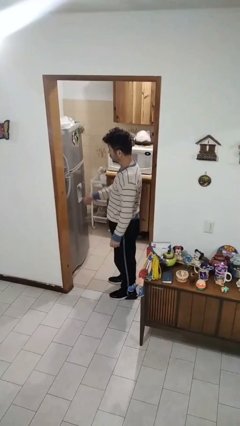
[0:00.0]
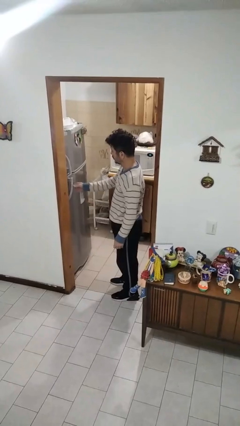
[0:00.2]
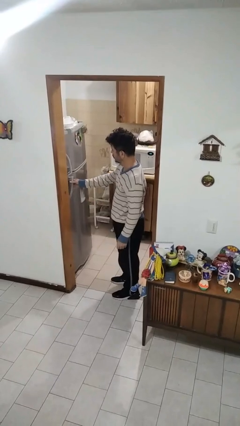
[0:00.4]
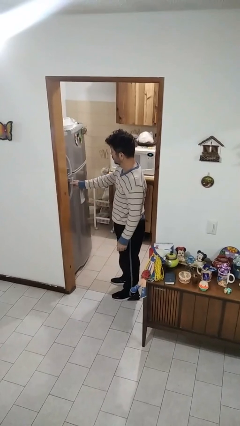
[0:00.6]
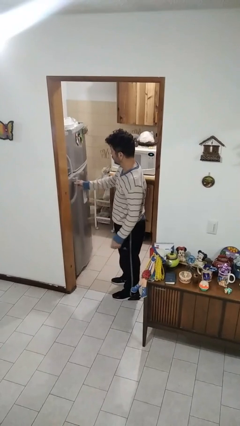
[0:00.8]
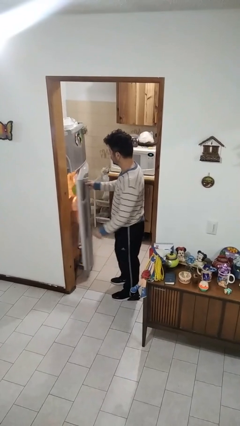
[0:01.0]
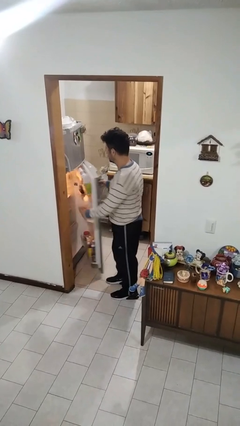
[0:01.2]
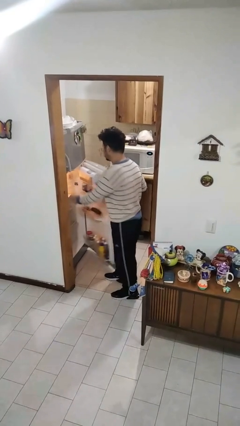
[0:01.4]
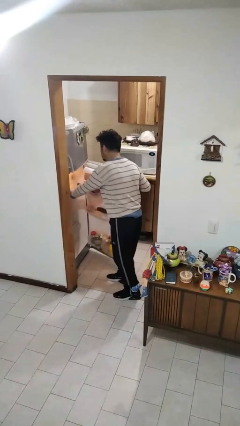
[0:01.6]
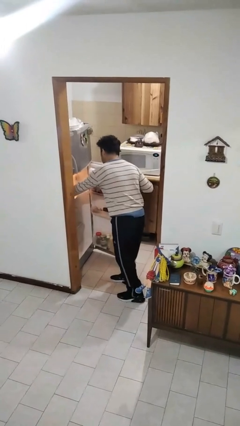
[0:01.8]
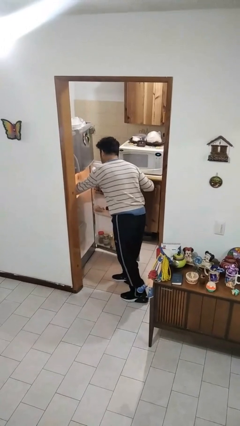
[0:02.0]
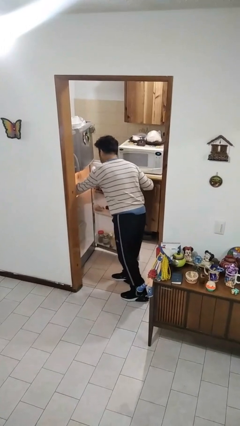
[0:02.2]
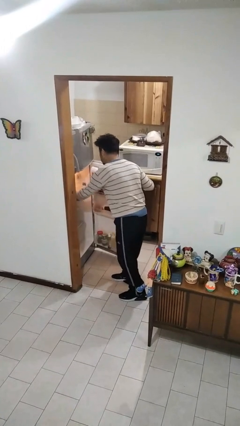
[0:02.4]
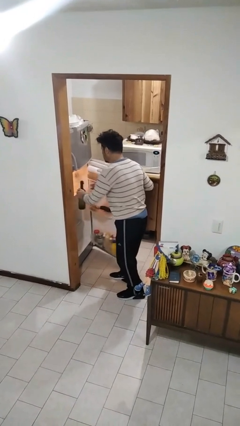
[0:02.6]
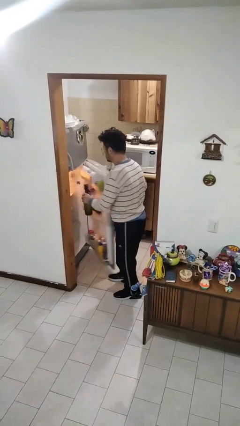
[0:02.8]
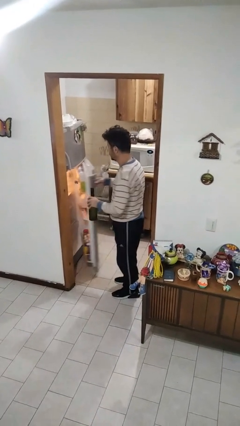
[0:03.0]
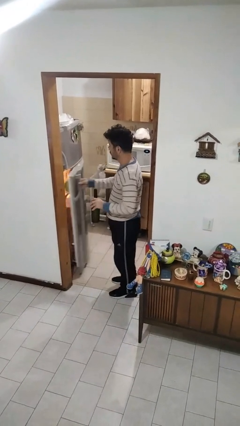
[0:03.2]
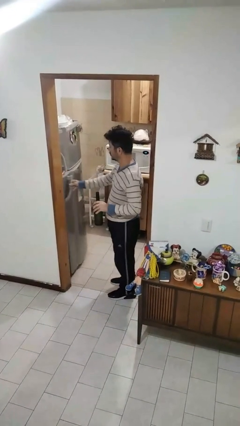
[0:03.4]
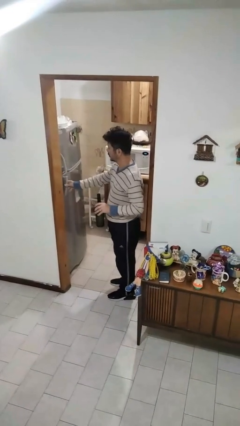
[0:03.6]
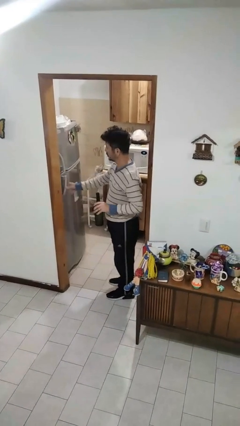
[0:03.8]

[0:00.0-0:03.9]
person takes object from refrigerator

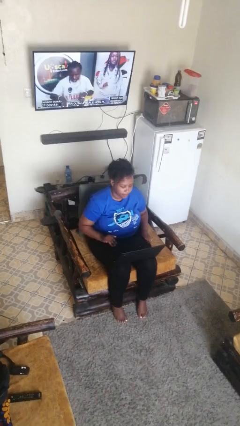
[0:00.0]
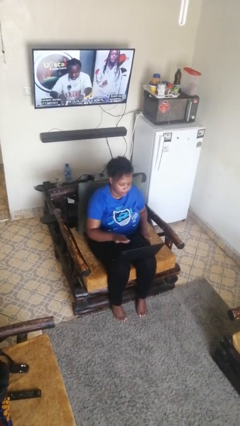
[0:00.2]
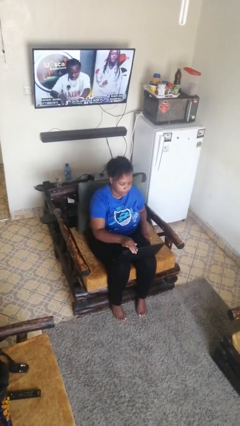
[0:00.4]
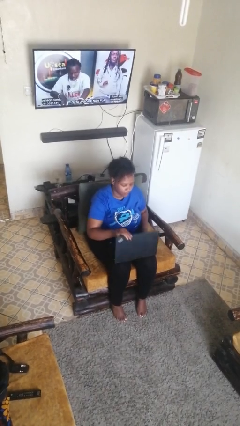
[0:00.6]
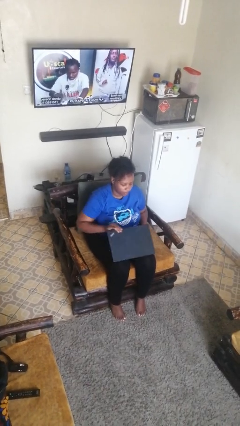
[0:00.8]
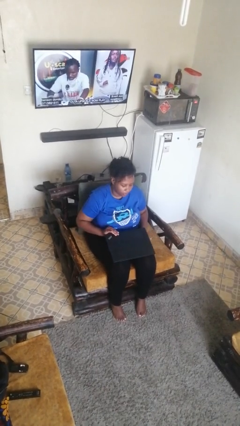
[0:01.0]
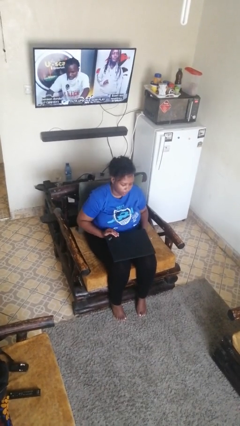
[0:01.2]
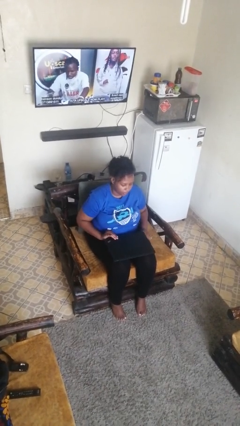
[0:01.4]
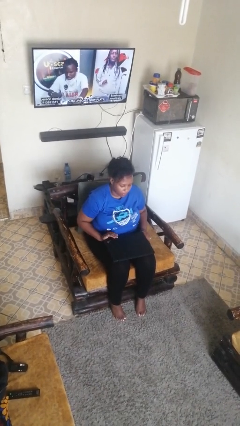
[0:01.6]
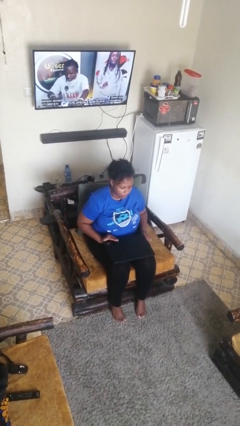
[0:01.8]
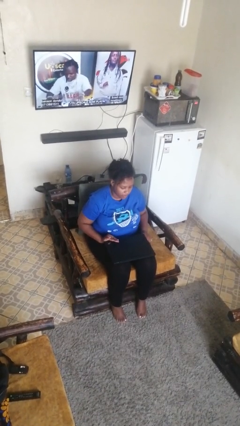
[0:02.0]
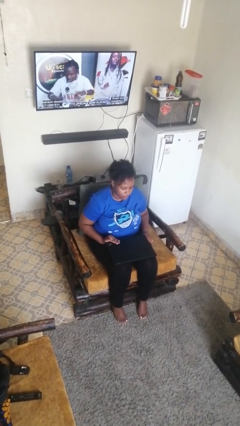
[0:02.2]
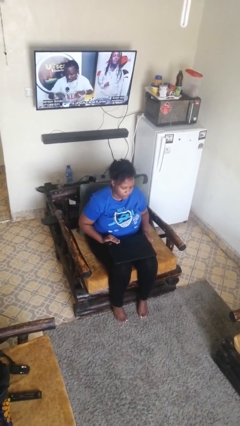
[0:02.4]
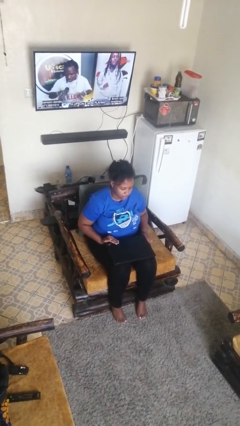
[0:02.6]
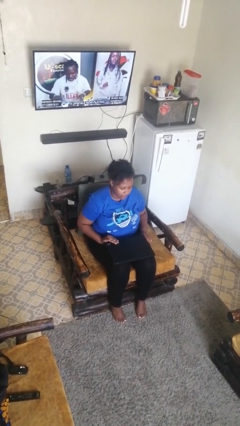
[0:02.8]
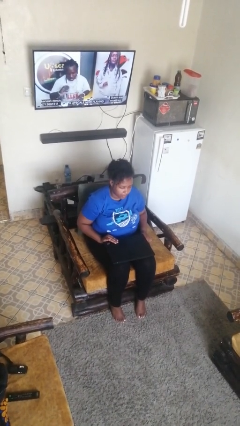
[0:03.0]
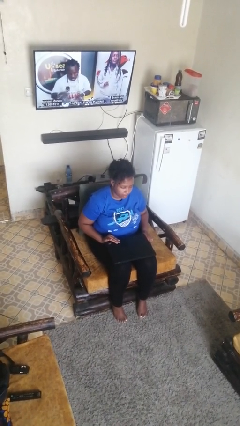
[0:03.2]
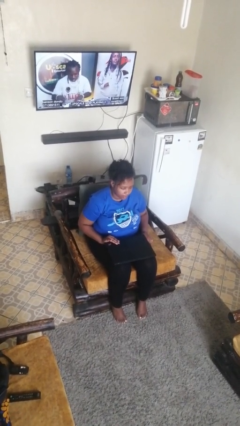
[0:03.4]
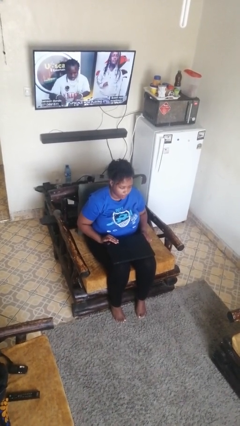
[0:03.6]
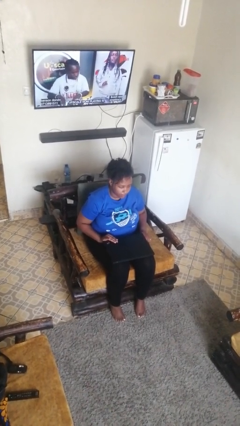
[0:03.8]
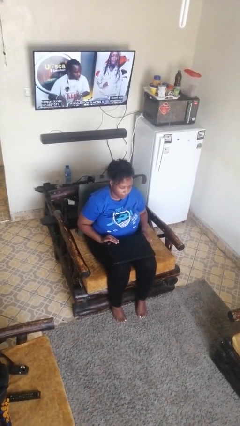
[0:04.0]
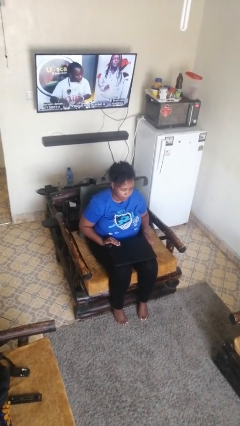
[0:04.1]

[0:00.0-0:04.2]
person closes laptop

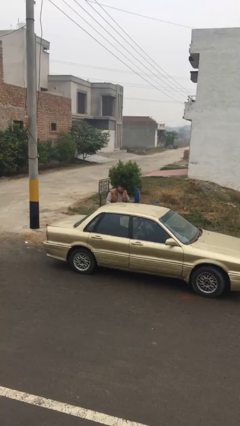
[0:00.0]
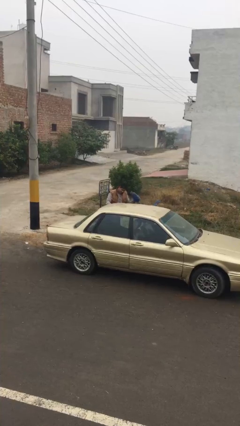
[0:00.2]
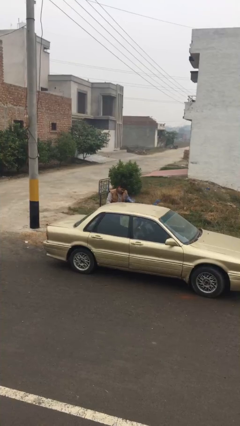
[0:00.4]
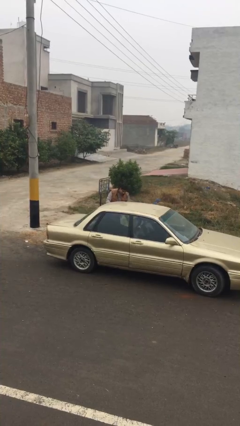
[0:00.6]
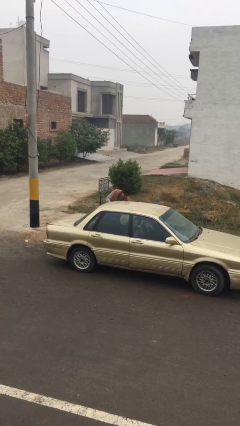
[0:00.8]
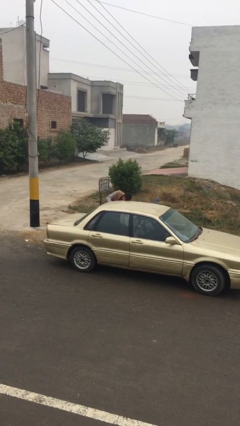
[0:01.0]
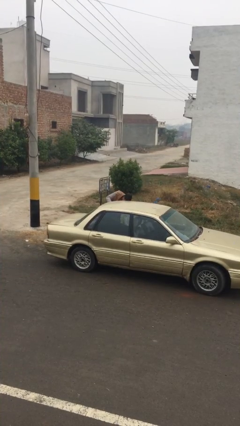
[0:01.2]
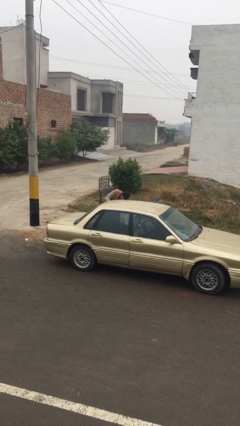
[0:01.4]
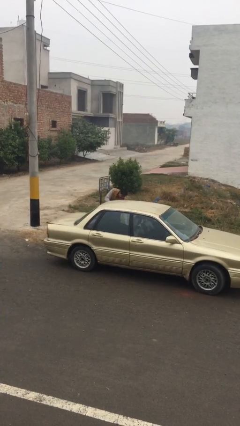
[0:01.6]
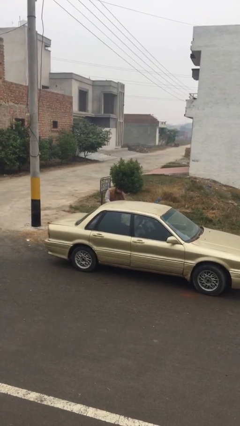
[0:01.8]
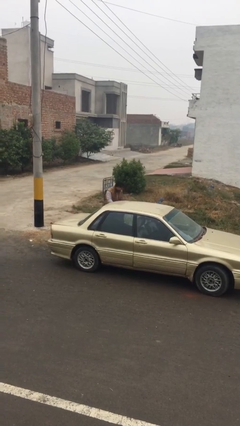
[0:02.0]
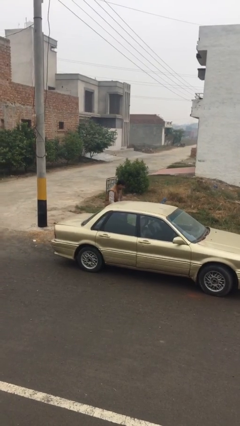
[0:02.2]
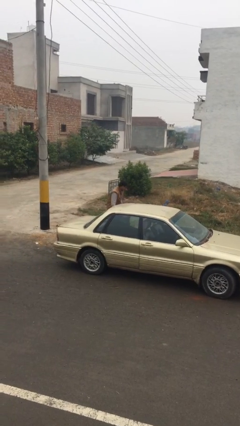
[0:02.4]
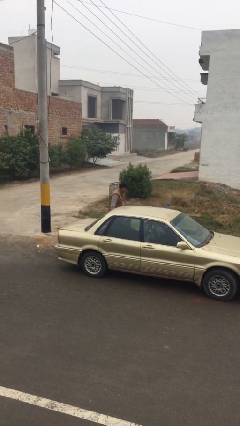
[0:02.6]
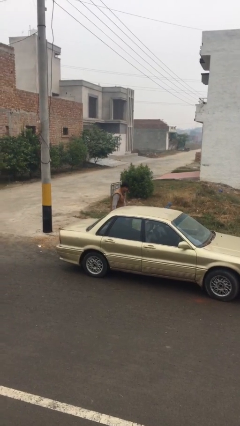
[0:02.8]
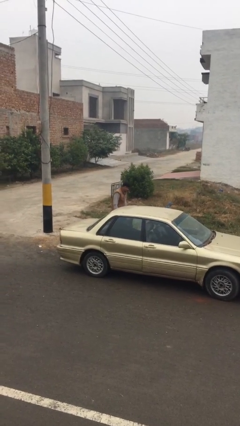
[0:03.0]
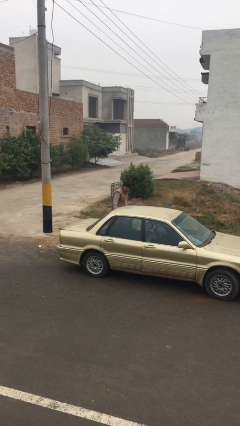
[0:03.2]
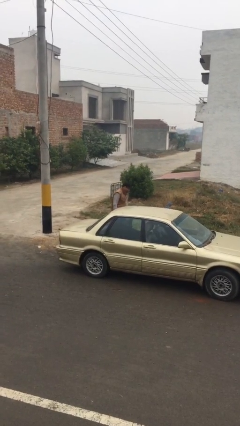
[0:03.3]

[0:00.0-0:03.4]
person loads car

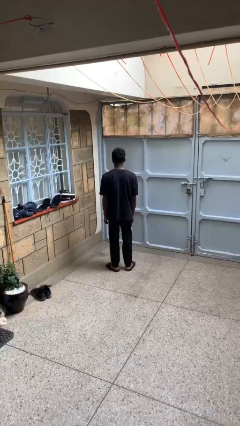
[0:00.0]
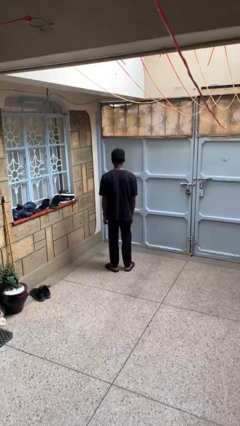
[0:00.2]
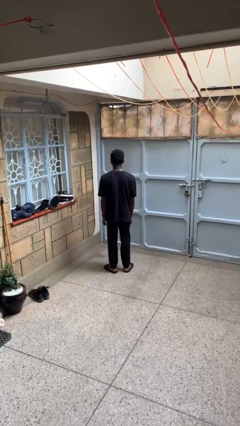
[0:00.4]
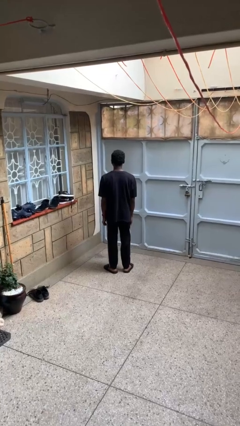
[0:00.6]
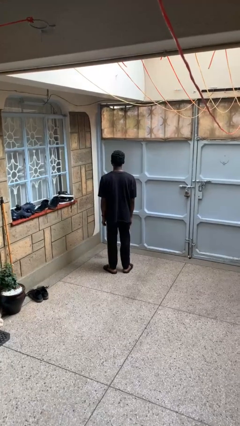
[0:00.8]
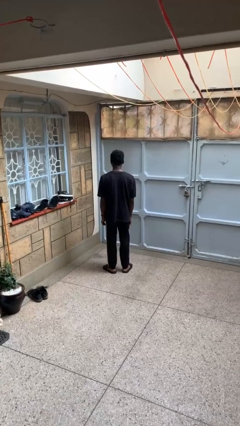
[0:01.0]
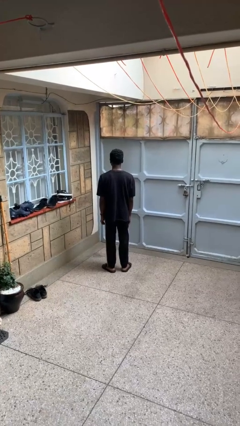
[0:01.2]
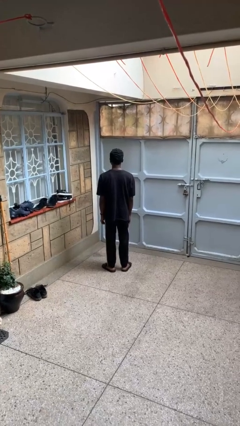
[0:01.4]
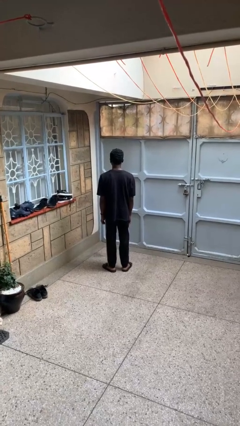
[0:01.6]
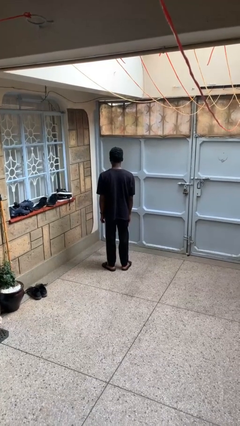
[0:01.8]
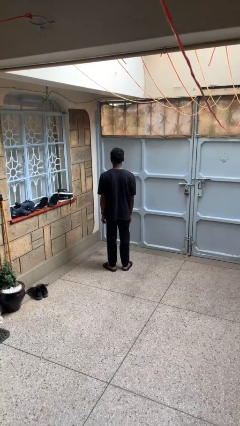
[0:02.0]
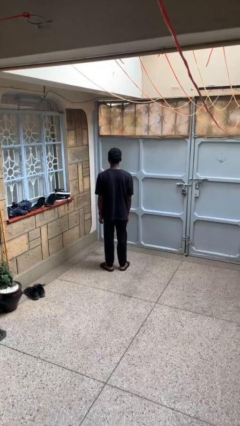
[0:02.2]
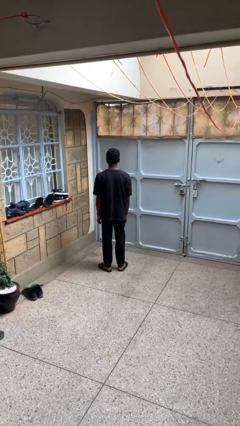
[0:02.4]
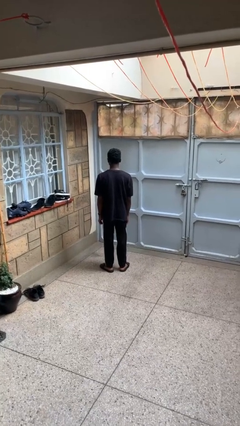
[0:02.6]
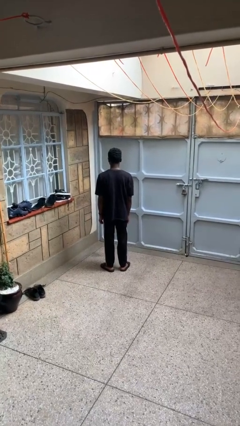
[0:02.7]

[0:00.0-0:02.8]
person nods head

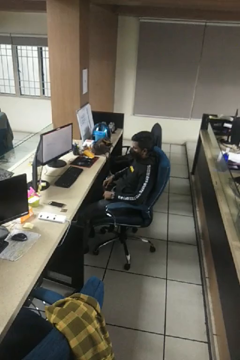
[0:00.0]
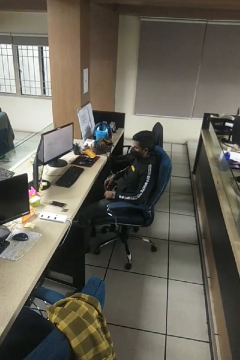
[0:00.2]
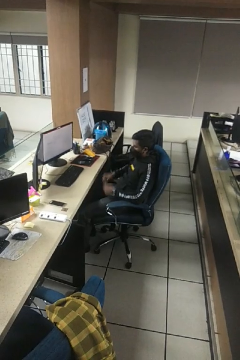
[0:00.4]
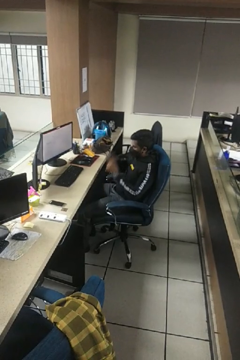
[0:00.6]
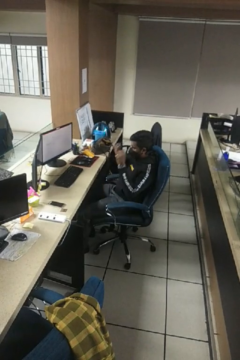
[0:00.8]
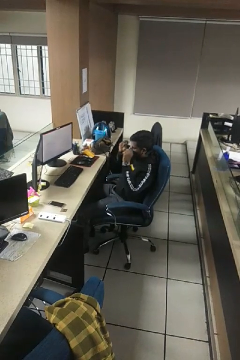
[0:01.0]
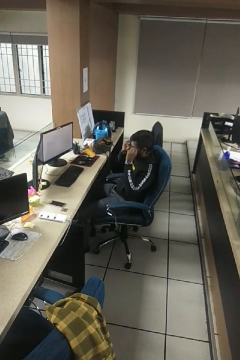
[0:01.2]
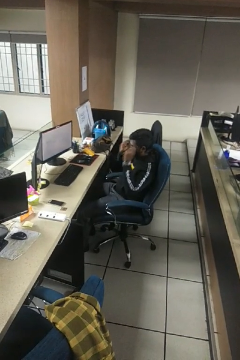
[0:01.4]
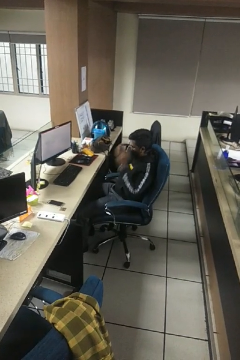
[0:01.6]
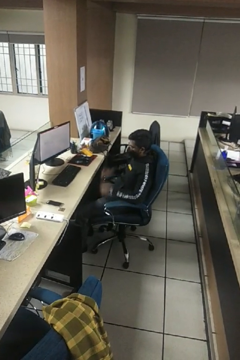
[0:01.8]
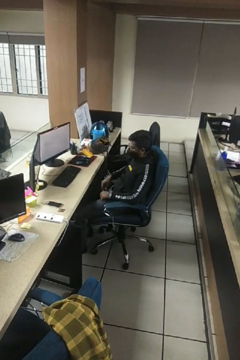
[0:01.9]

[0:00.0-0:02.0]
person puts on glasses

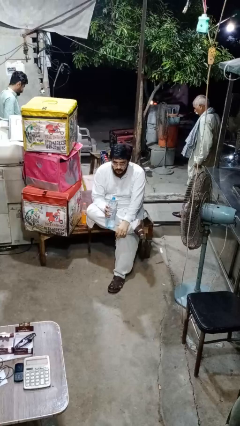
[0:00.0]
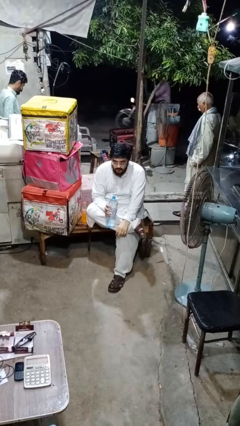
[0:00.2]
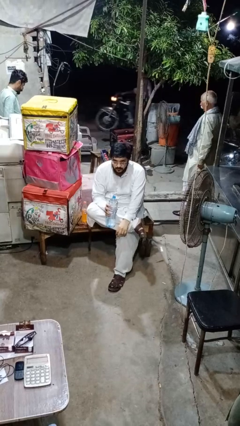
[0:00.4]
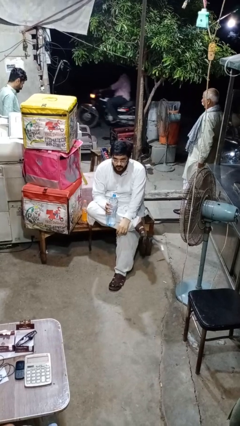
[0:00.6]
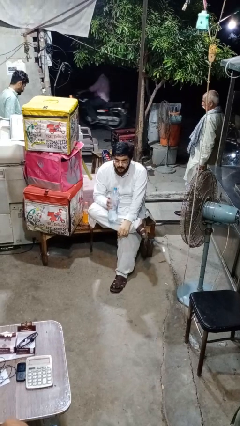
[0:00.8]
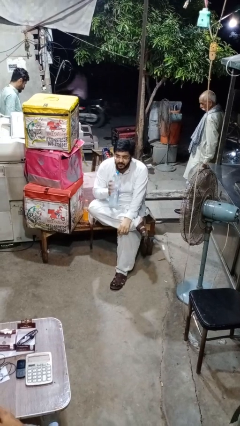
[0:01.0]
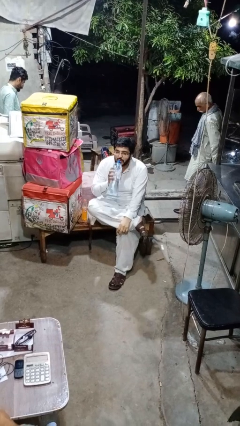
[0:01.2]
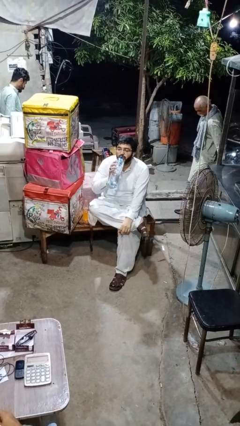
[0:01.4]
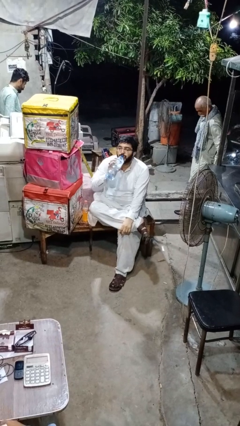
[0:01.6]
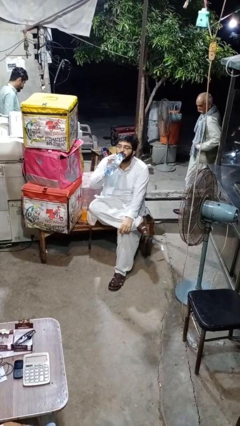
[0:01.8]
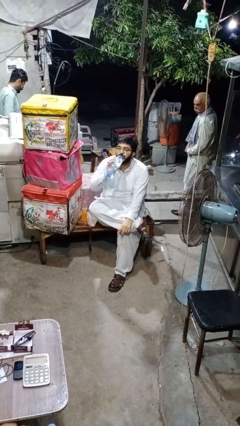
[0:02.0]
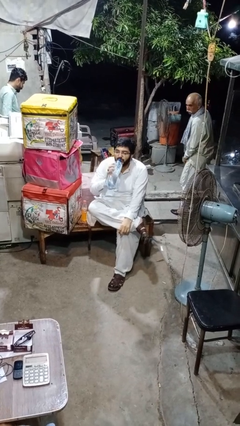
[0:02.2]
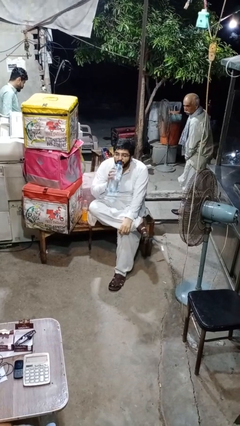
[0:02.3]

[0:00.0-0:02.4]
person drinks from bottle
